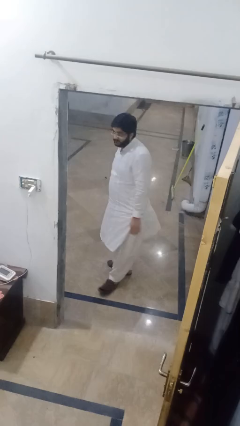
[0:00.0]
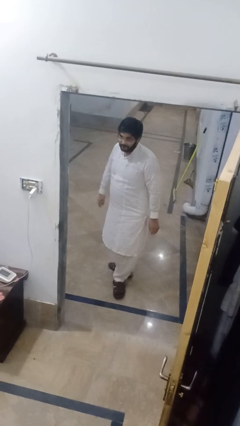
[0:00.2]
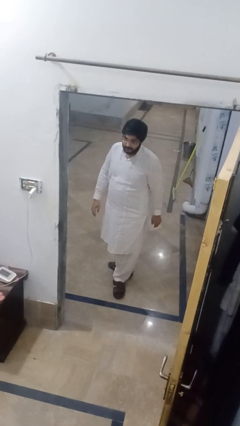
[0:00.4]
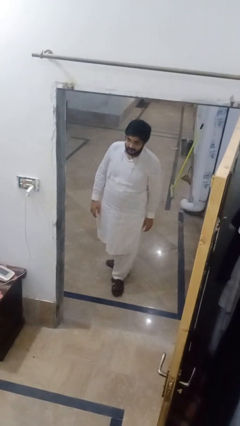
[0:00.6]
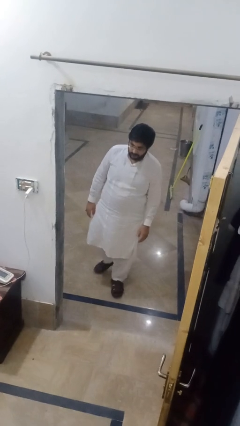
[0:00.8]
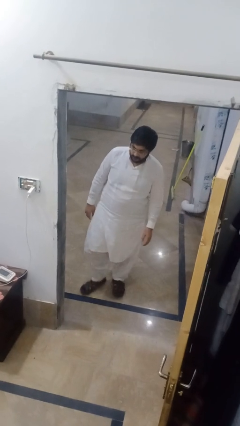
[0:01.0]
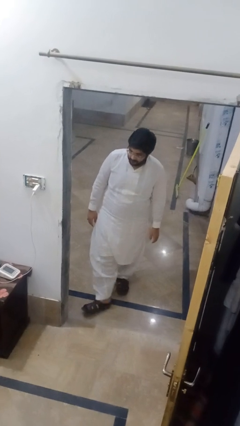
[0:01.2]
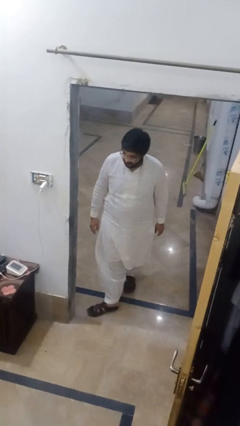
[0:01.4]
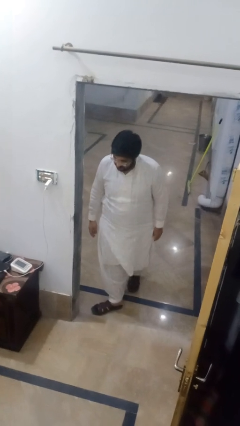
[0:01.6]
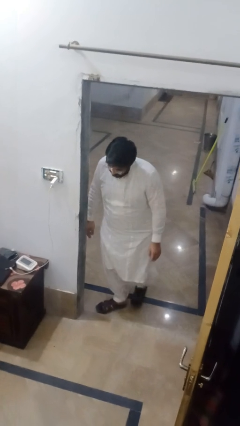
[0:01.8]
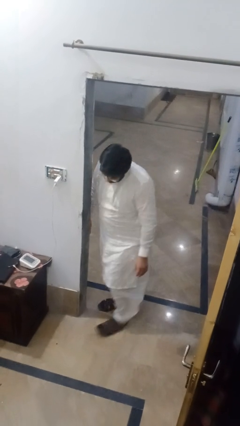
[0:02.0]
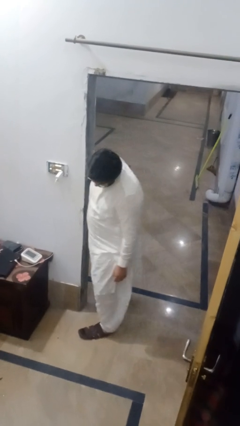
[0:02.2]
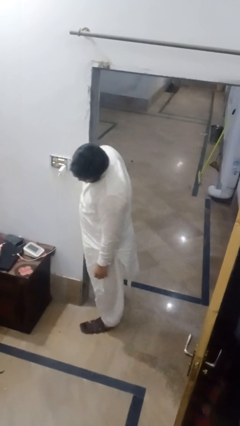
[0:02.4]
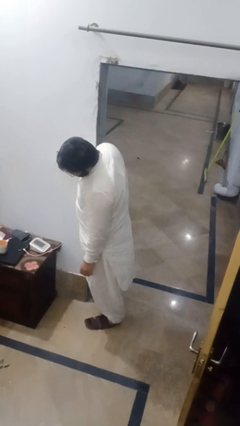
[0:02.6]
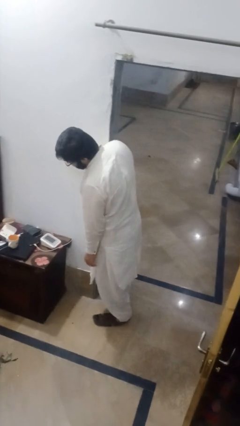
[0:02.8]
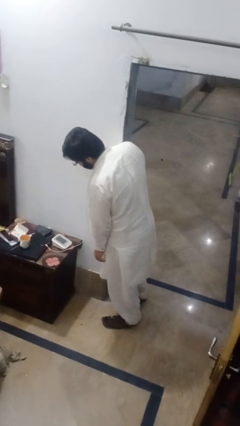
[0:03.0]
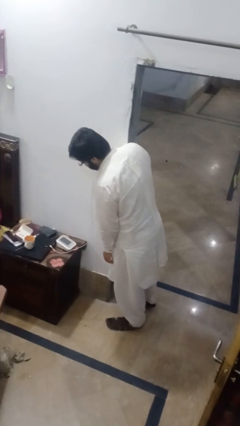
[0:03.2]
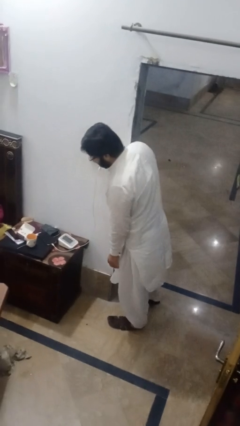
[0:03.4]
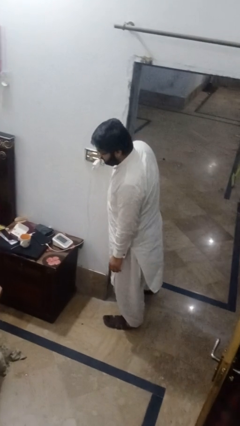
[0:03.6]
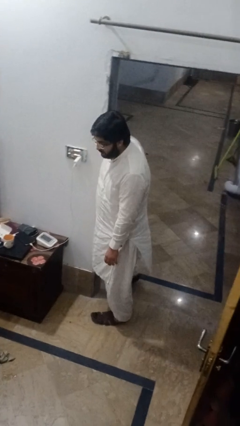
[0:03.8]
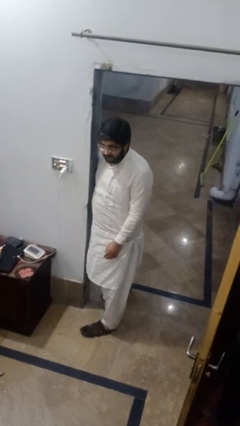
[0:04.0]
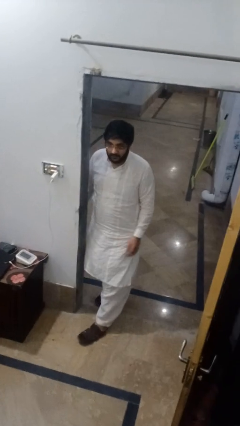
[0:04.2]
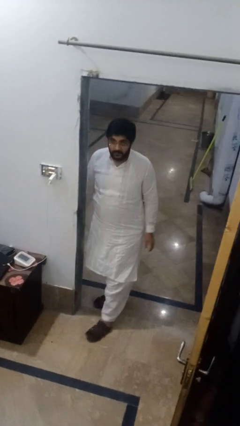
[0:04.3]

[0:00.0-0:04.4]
person bumps into wall

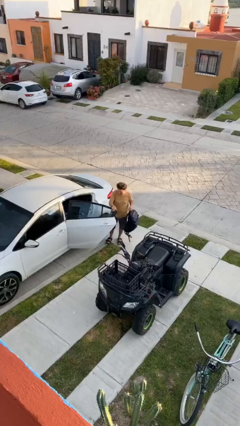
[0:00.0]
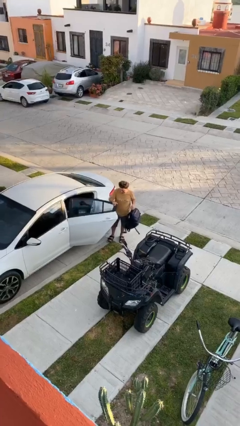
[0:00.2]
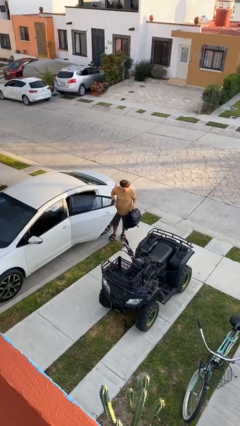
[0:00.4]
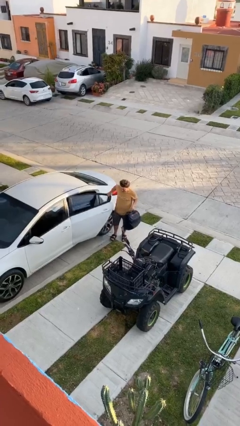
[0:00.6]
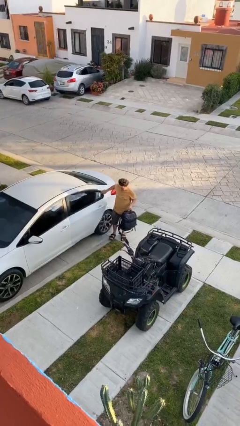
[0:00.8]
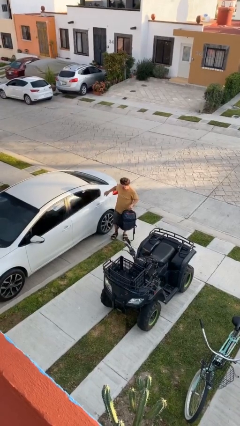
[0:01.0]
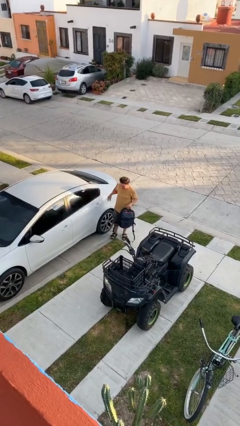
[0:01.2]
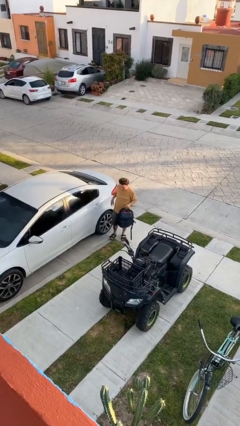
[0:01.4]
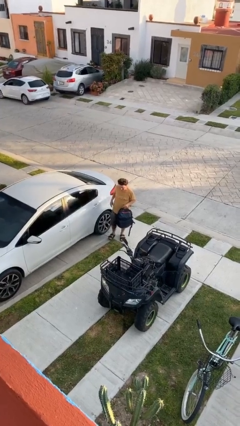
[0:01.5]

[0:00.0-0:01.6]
person closes car door

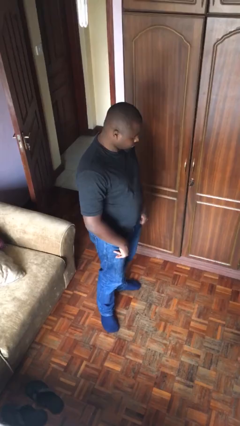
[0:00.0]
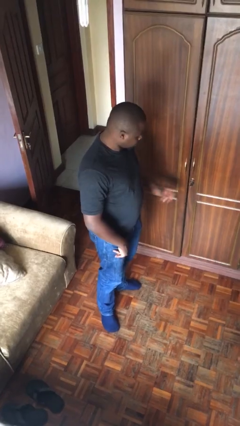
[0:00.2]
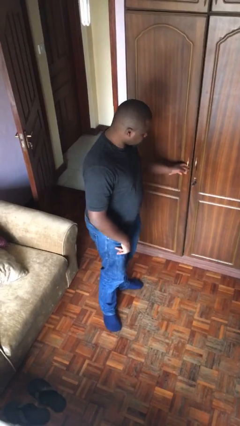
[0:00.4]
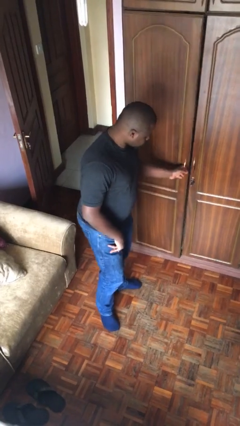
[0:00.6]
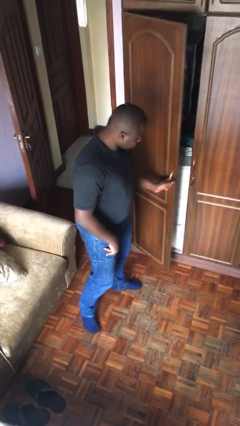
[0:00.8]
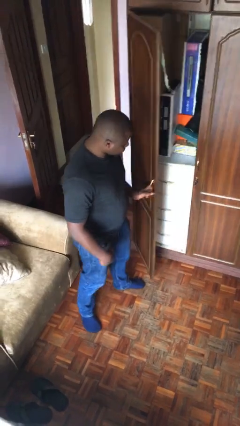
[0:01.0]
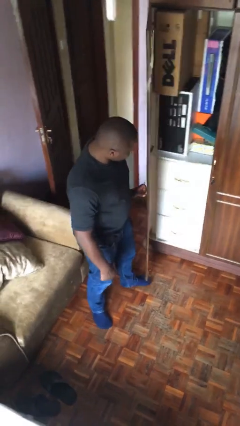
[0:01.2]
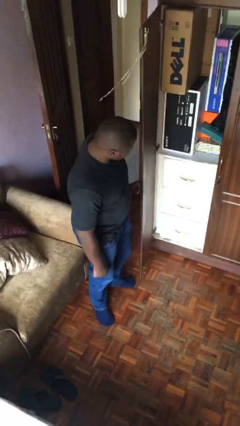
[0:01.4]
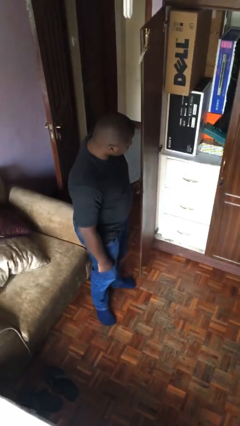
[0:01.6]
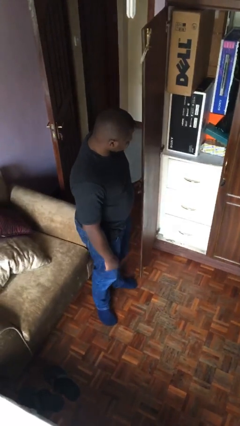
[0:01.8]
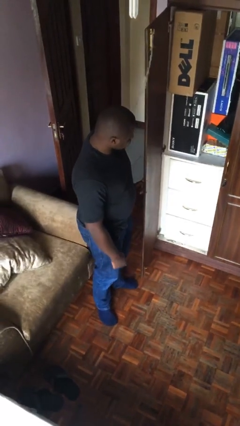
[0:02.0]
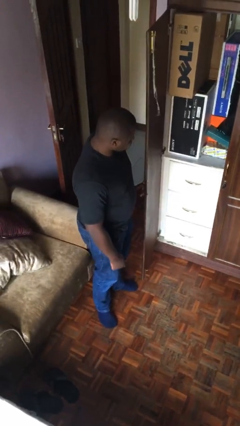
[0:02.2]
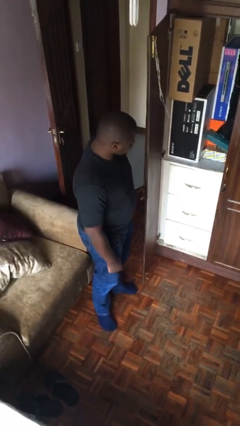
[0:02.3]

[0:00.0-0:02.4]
person opens dresser drawer

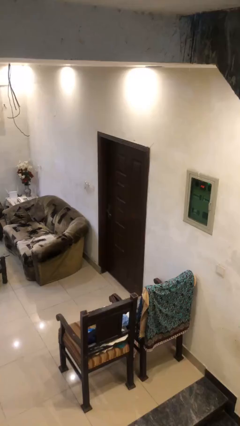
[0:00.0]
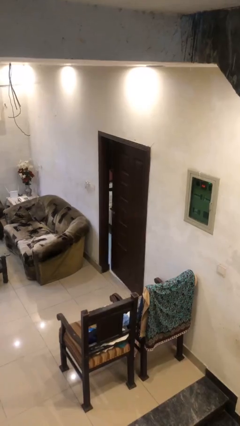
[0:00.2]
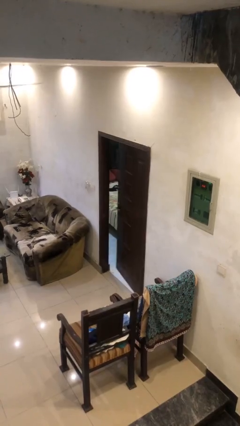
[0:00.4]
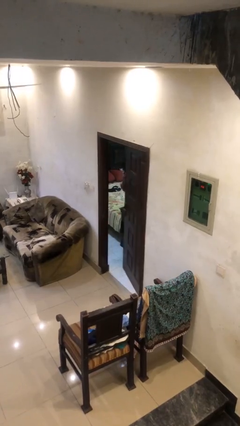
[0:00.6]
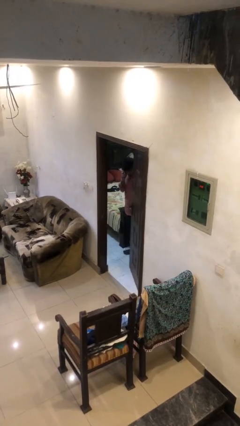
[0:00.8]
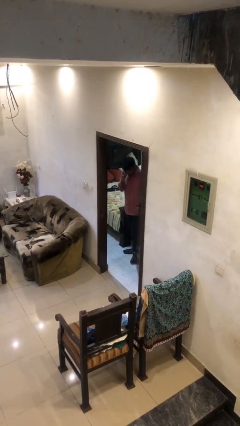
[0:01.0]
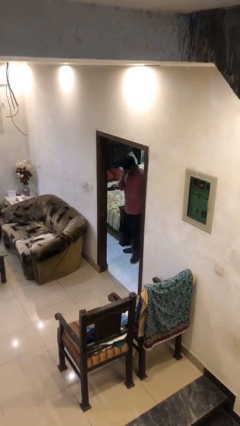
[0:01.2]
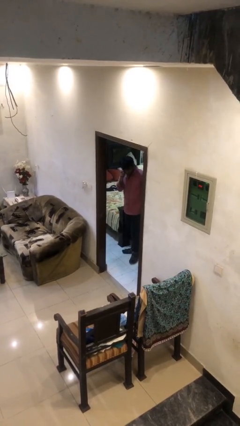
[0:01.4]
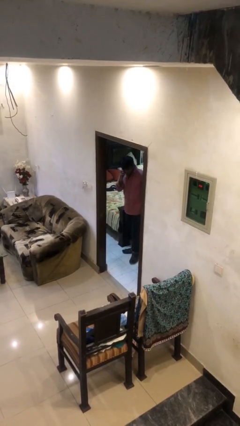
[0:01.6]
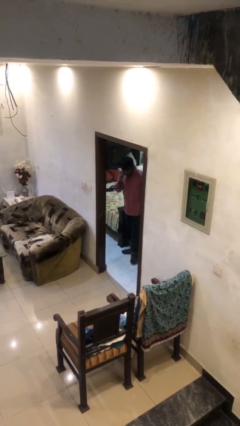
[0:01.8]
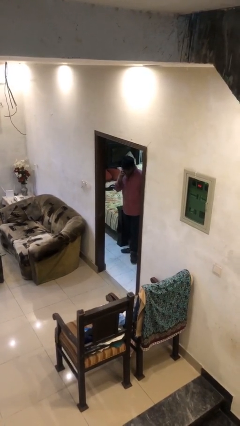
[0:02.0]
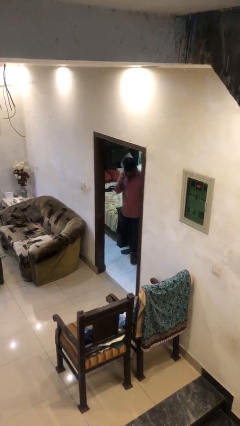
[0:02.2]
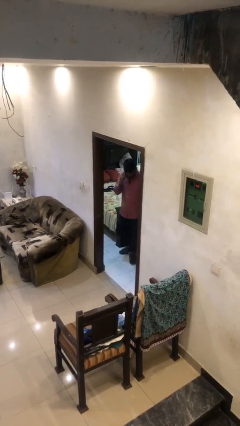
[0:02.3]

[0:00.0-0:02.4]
person opens facility door

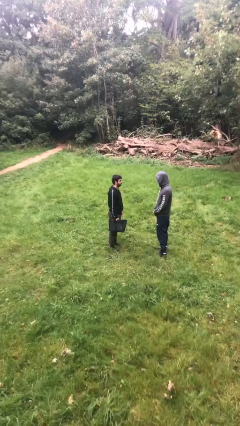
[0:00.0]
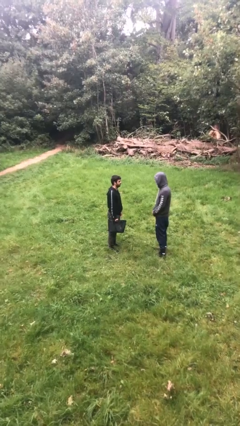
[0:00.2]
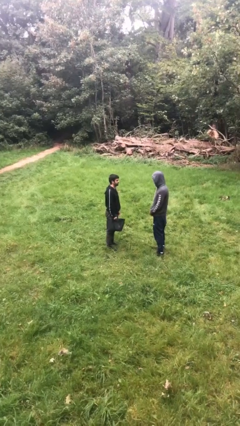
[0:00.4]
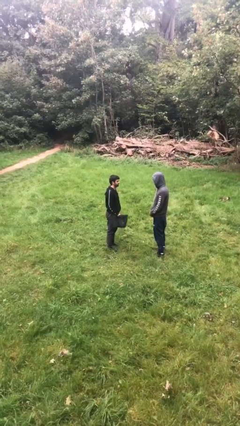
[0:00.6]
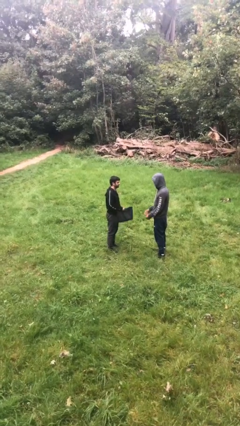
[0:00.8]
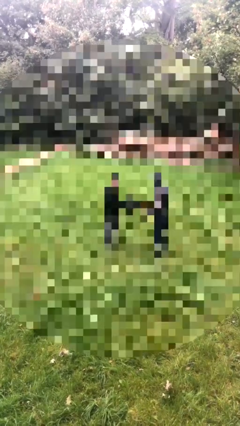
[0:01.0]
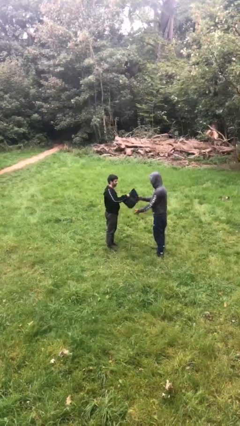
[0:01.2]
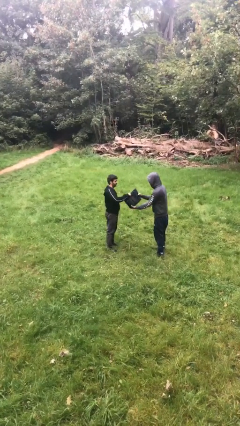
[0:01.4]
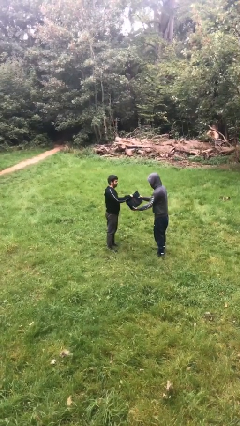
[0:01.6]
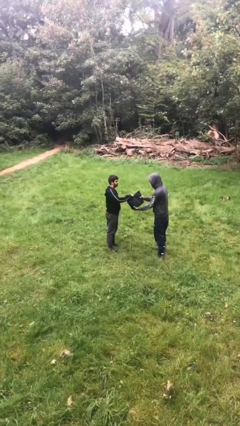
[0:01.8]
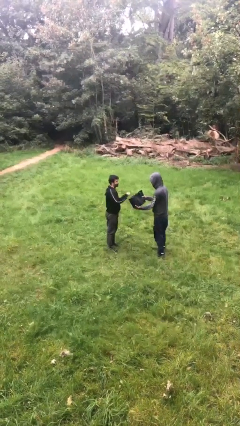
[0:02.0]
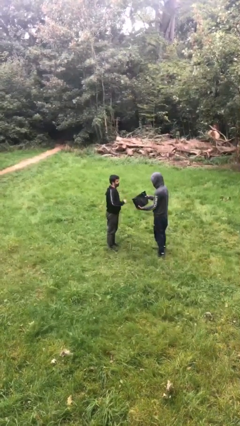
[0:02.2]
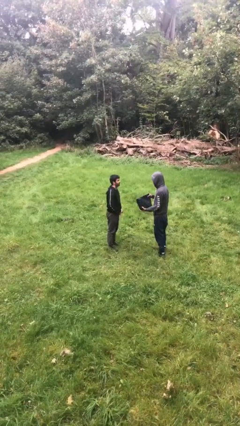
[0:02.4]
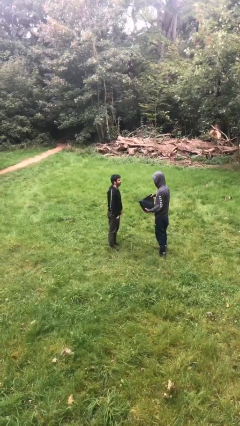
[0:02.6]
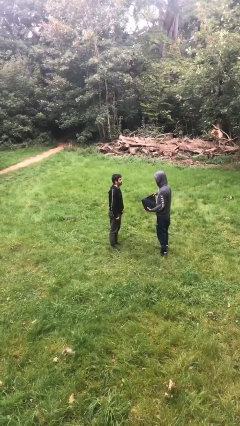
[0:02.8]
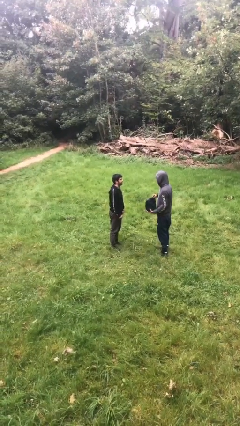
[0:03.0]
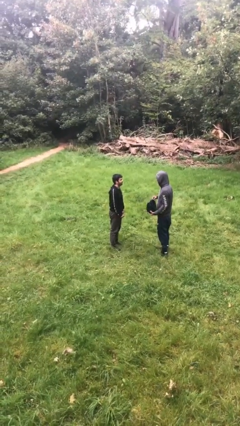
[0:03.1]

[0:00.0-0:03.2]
person transfers object to person

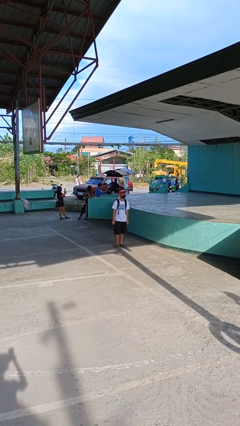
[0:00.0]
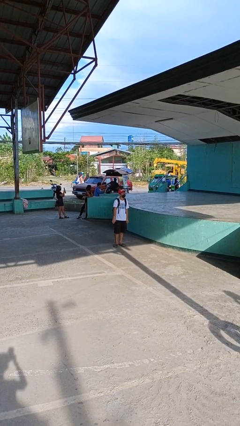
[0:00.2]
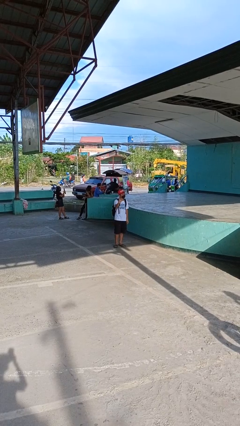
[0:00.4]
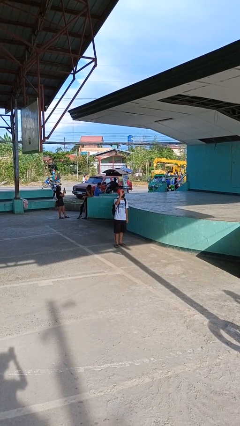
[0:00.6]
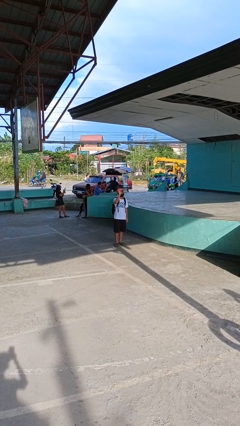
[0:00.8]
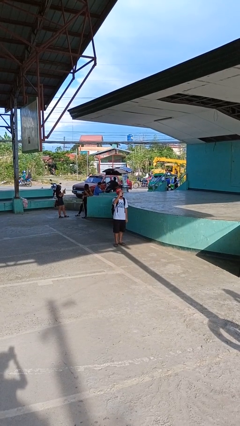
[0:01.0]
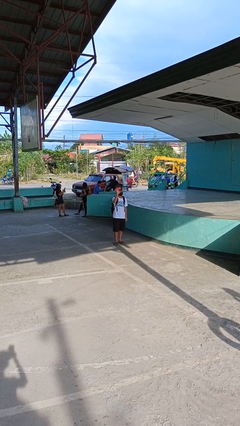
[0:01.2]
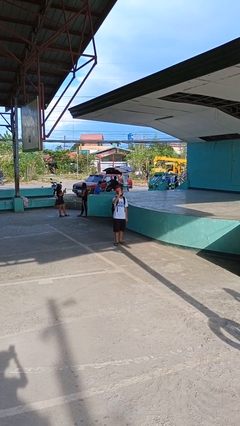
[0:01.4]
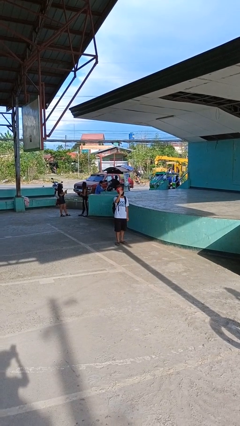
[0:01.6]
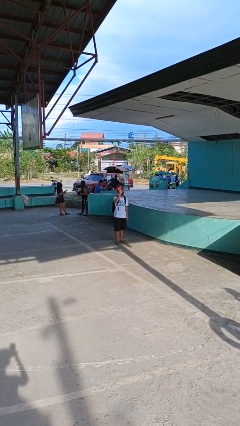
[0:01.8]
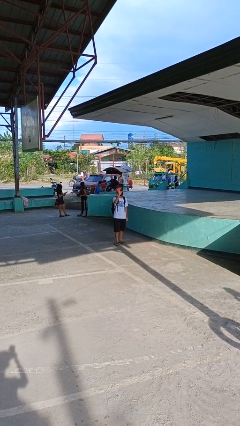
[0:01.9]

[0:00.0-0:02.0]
person waves at person

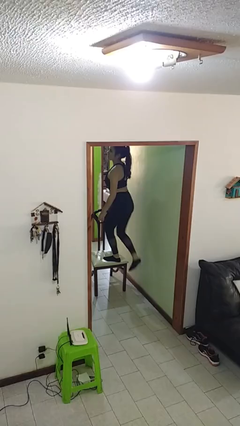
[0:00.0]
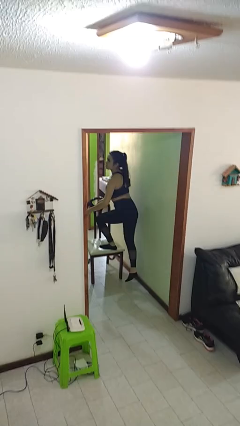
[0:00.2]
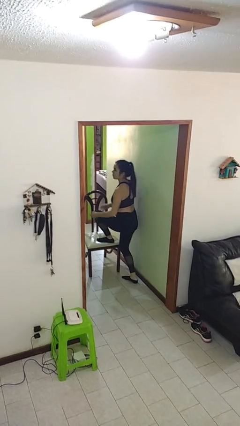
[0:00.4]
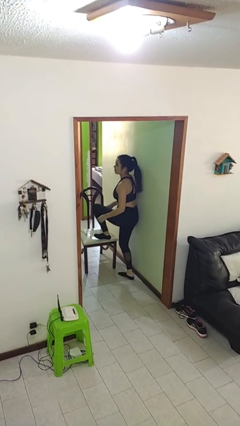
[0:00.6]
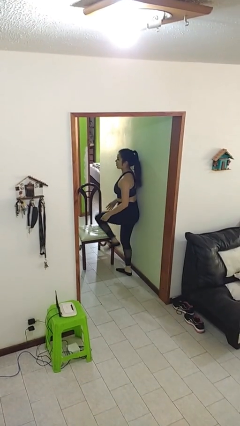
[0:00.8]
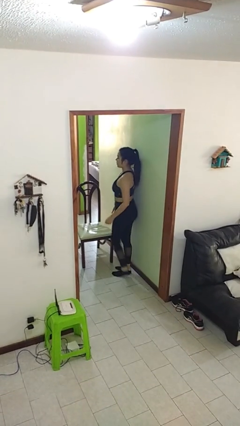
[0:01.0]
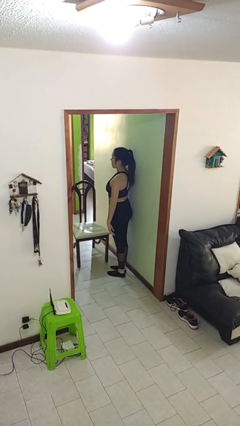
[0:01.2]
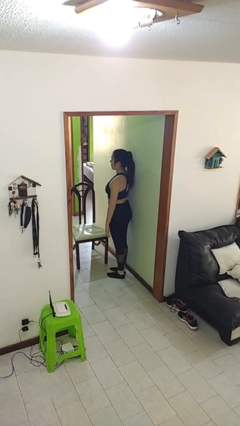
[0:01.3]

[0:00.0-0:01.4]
person climbs off chair
